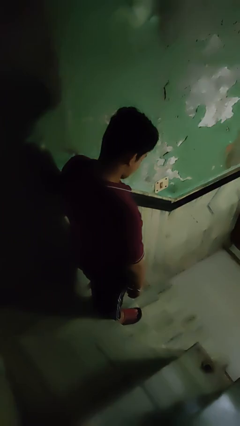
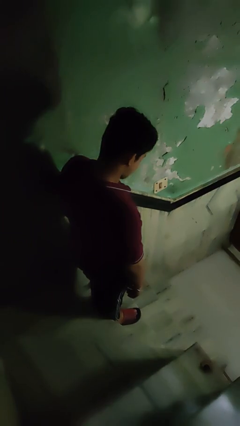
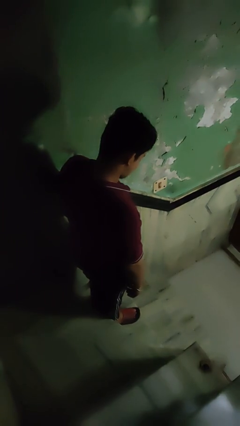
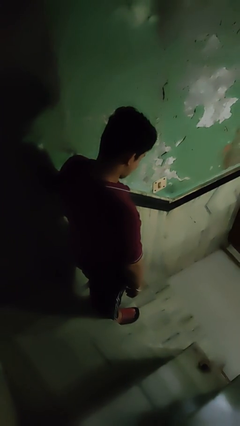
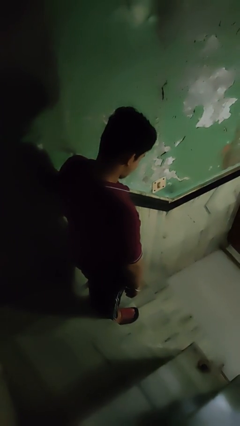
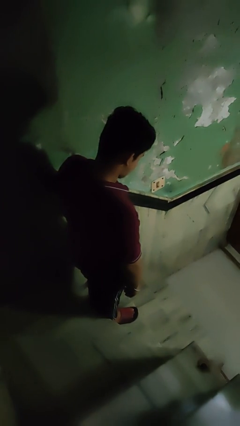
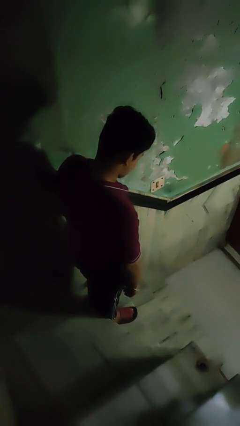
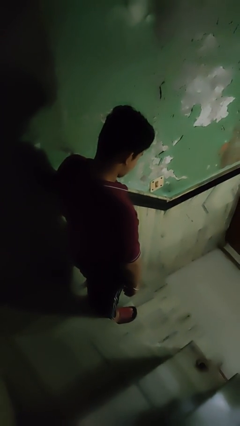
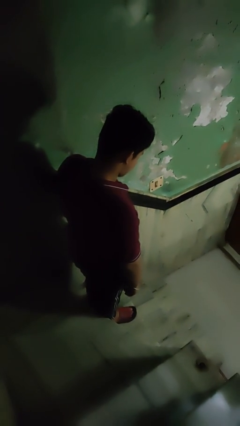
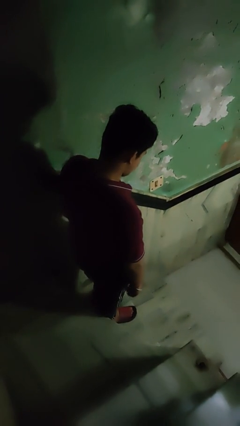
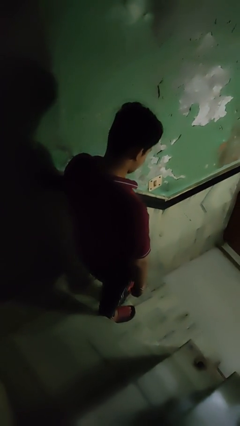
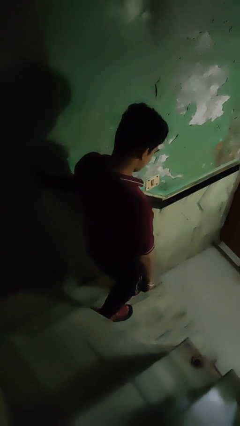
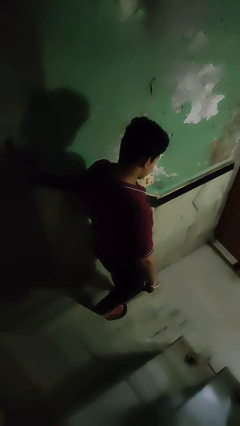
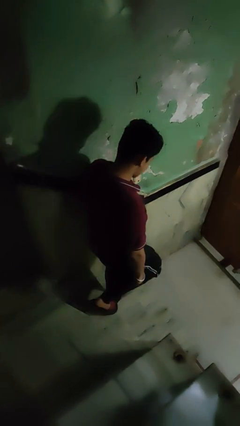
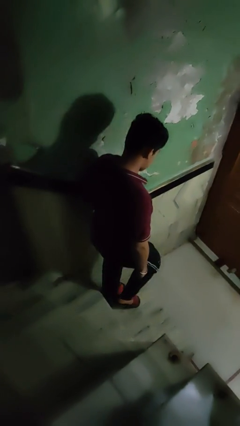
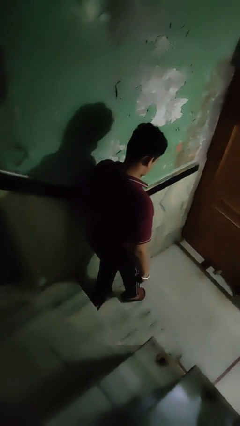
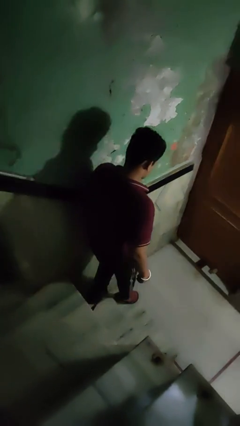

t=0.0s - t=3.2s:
person climbs down stairs

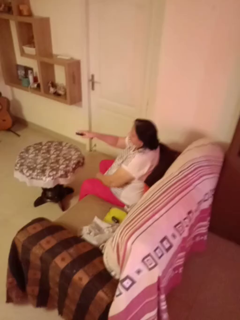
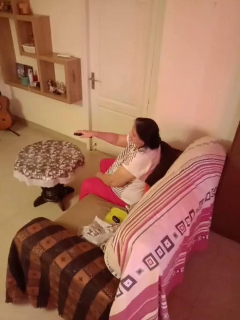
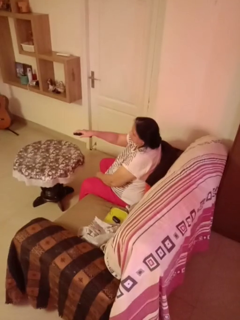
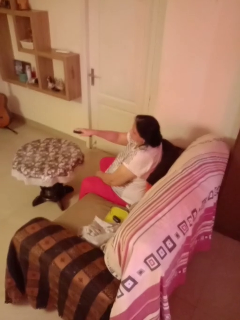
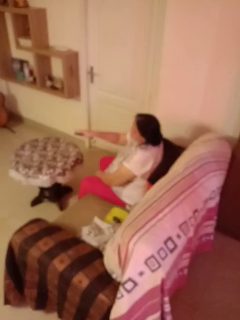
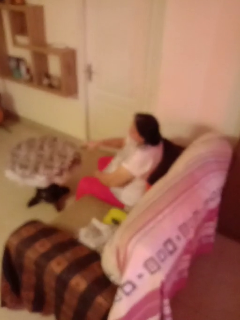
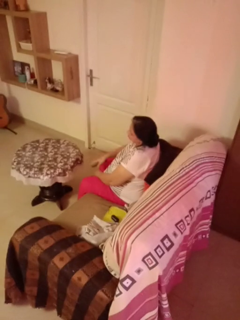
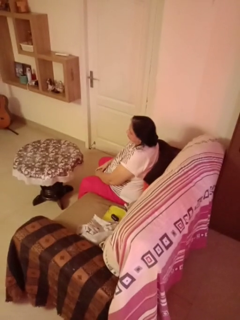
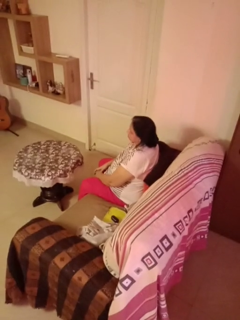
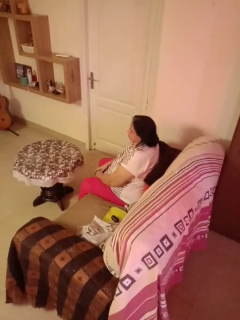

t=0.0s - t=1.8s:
person uses television remote

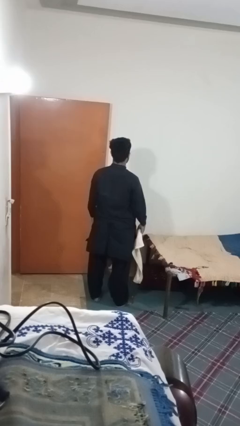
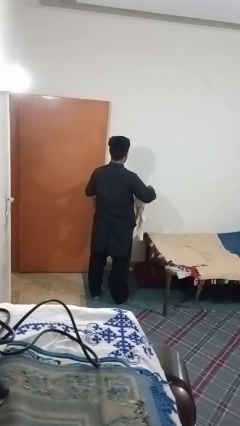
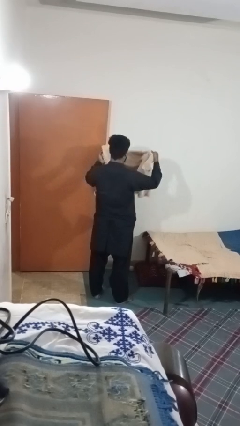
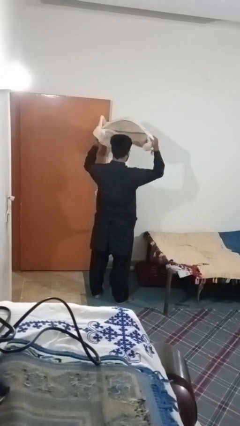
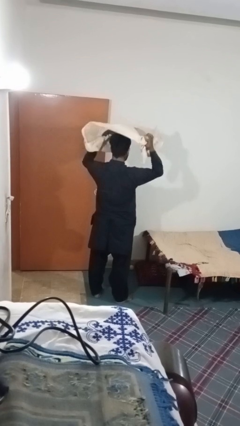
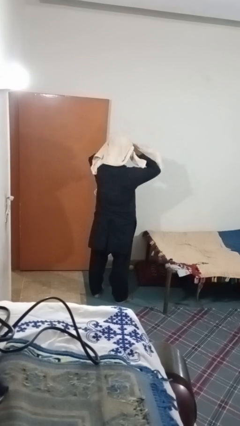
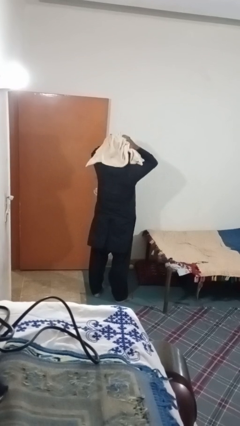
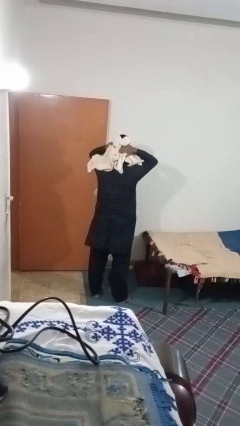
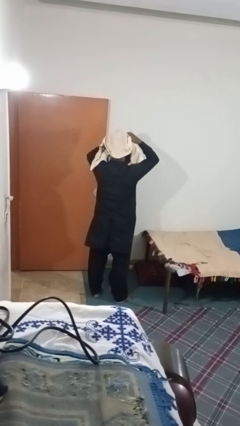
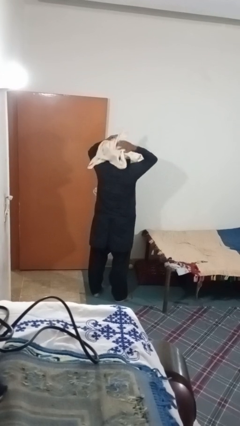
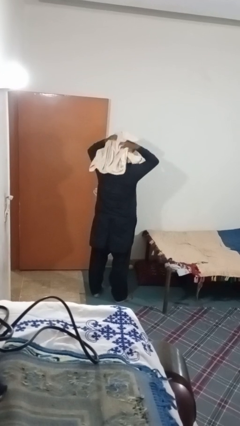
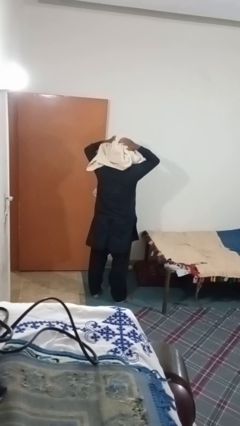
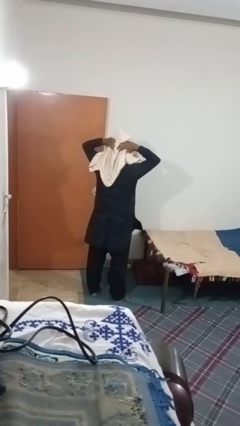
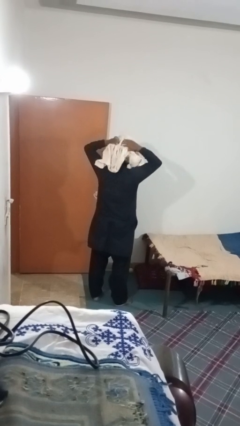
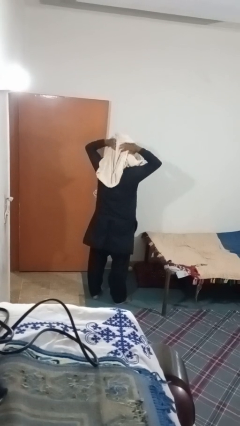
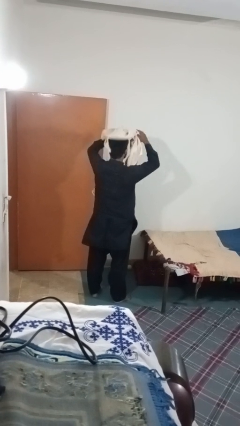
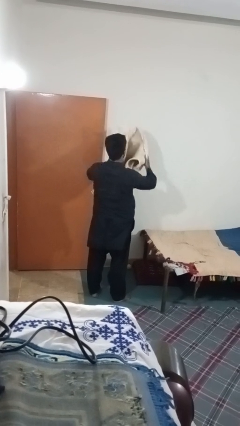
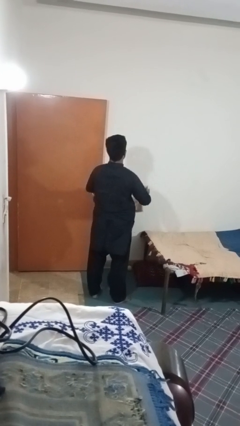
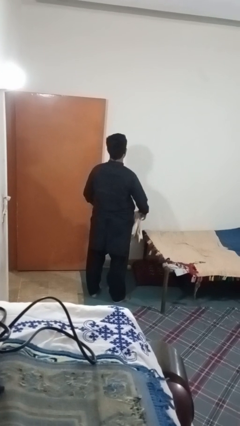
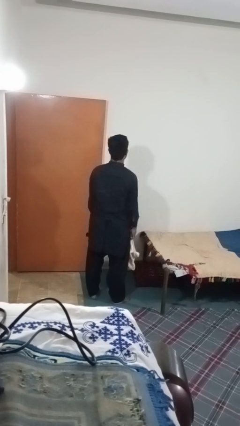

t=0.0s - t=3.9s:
person dries hair with towel

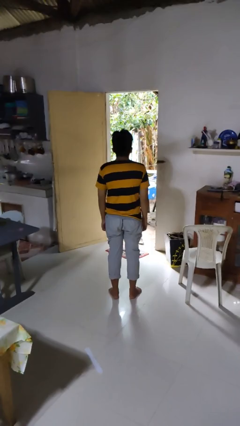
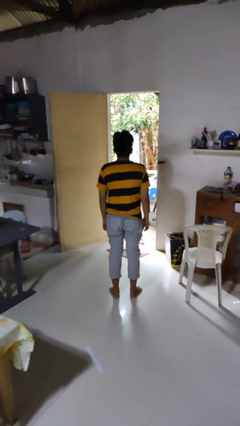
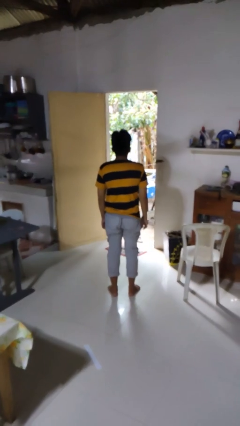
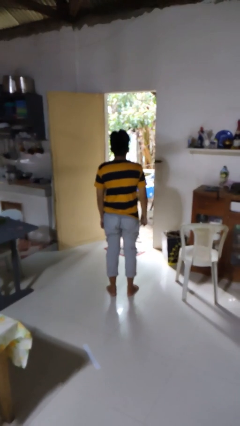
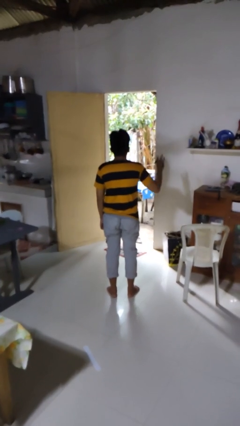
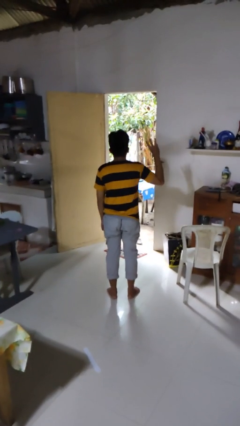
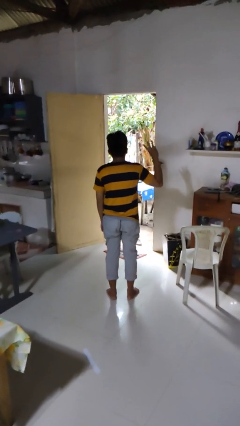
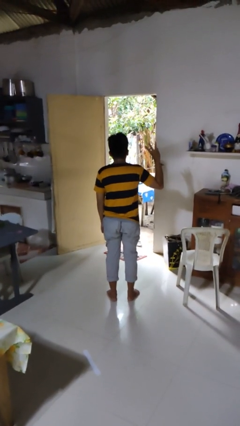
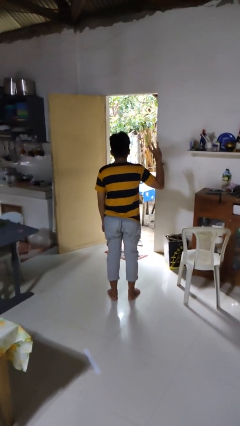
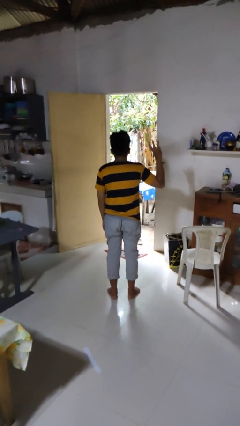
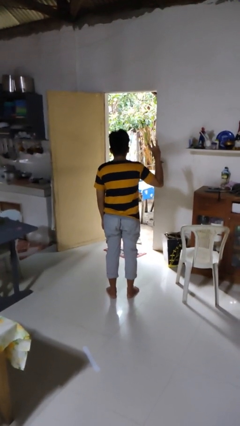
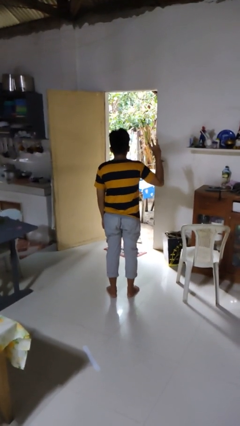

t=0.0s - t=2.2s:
person gestures number three

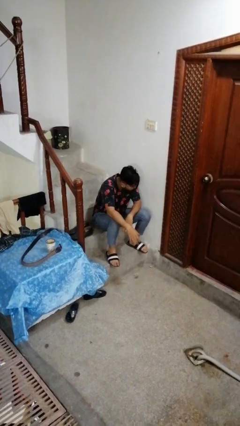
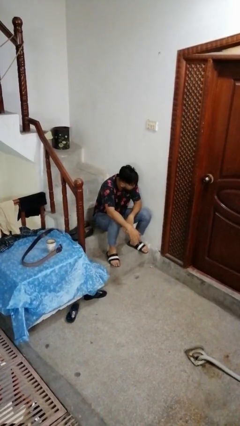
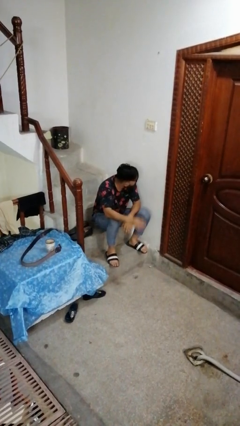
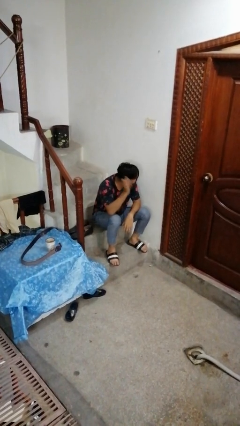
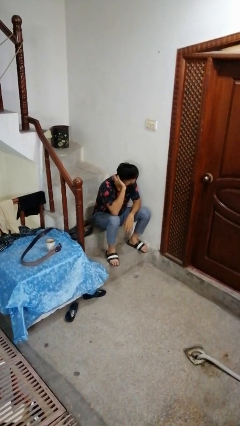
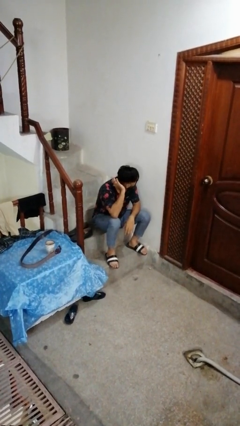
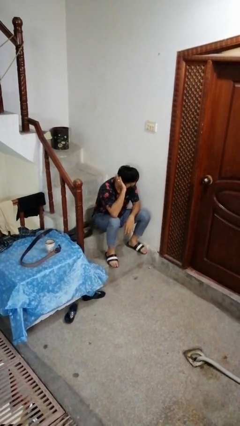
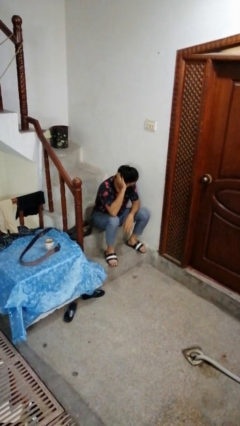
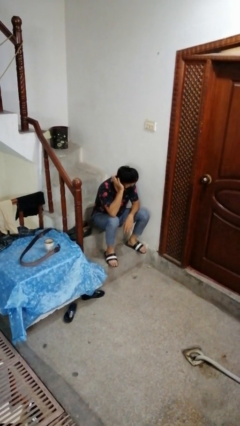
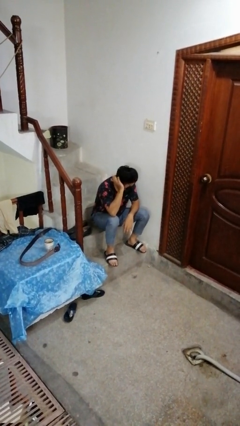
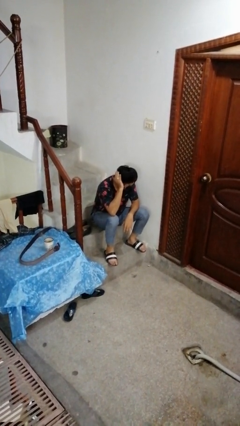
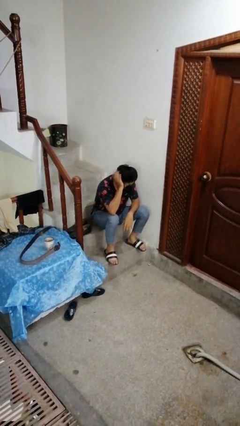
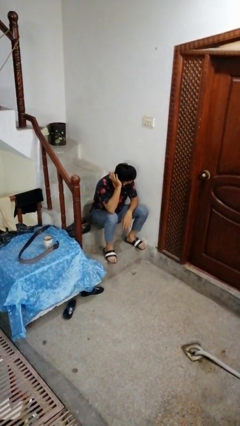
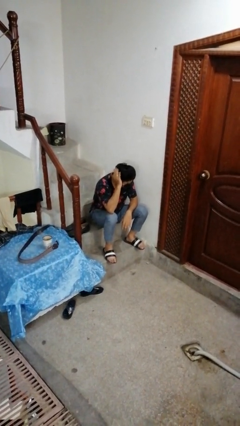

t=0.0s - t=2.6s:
person strokes hair

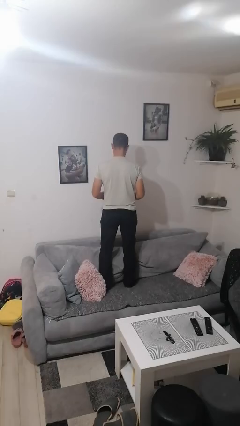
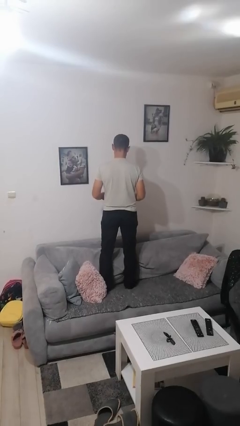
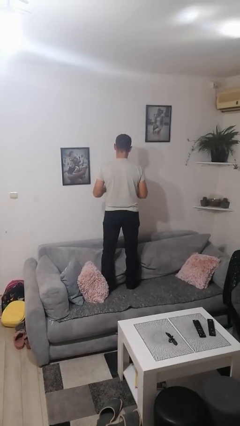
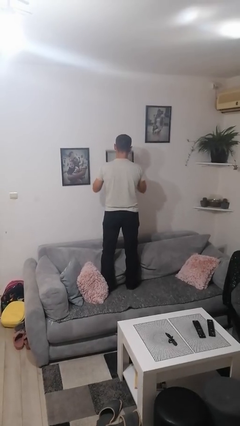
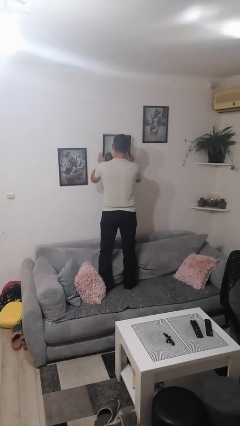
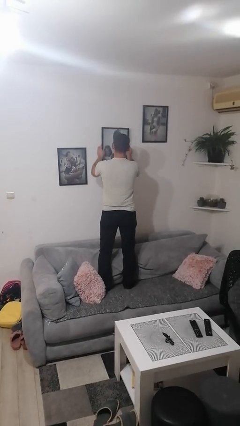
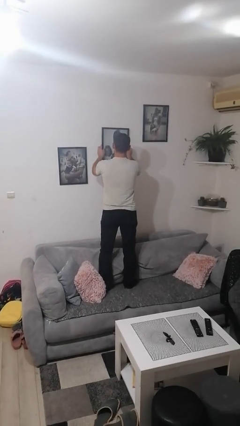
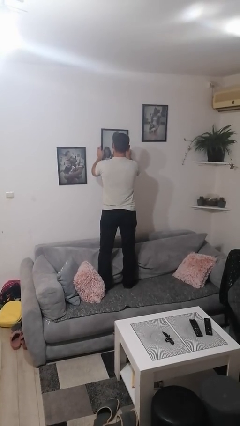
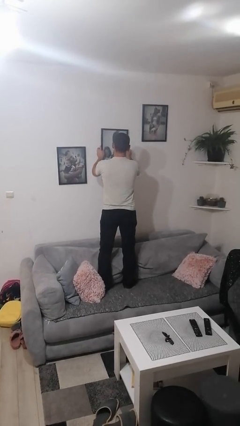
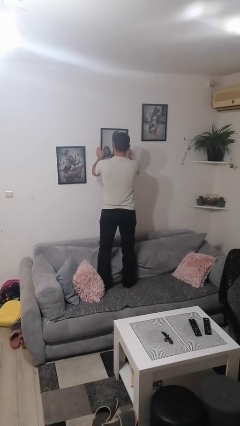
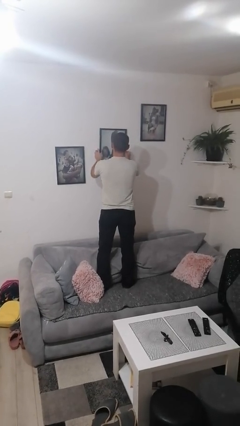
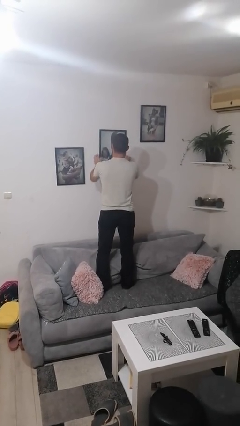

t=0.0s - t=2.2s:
person puts up picture frame

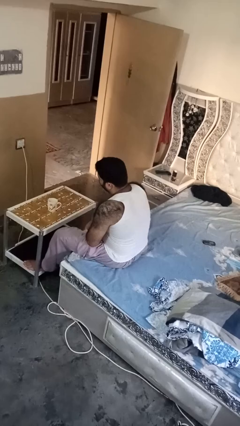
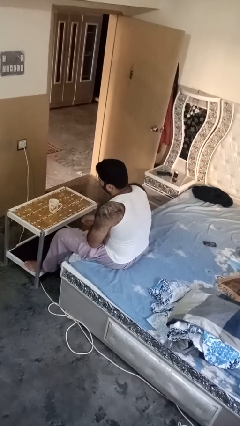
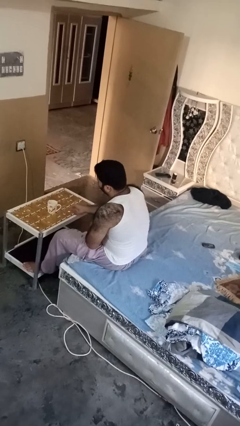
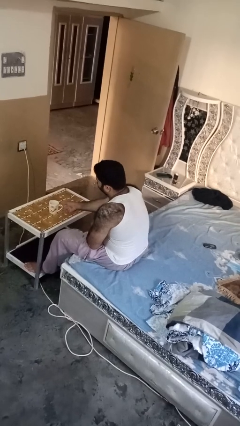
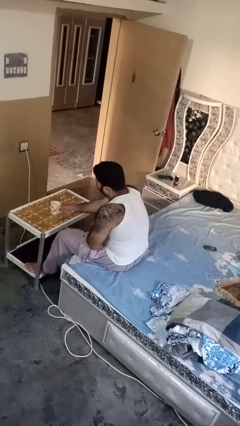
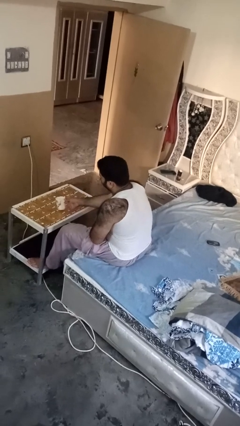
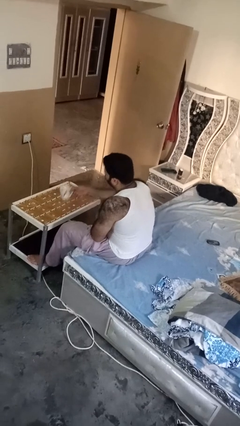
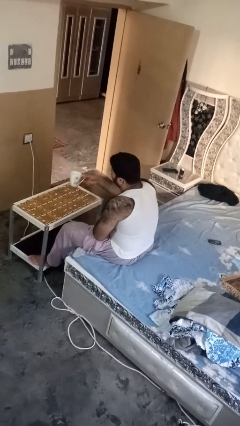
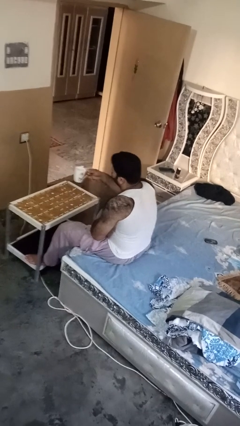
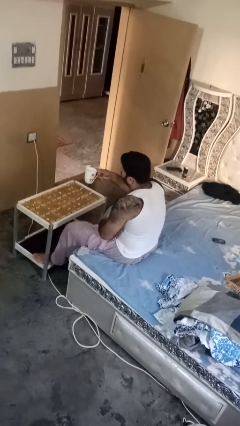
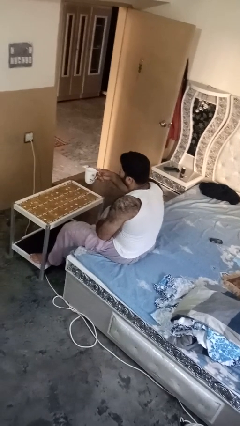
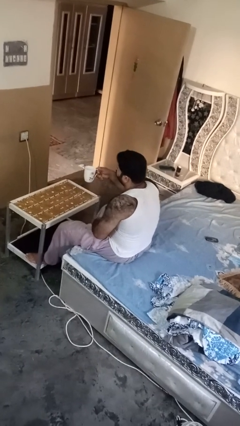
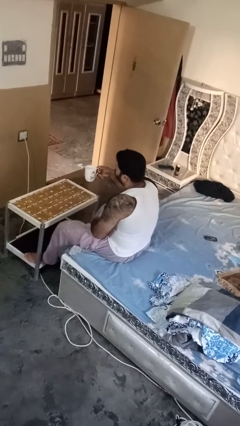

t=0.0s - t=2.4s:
person picks up object from table
